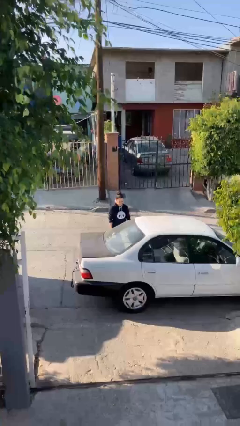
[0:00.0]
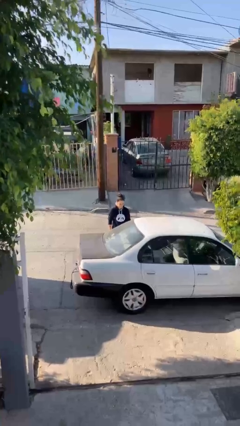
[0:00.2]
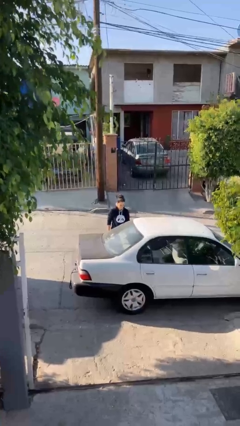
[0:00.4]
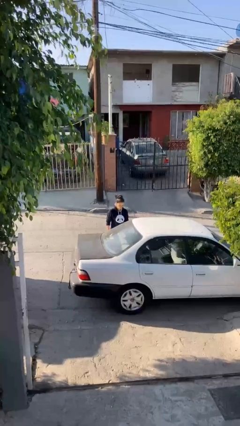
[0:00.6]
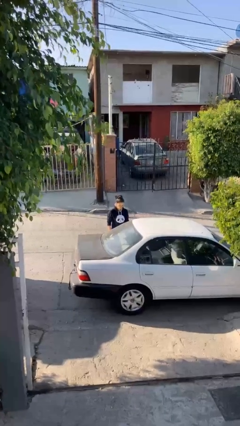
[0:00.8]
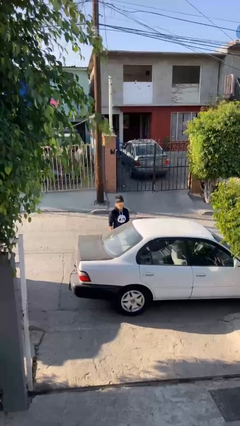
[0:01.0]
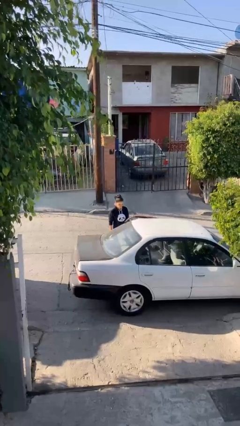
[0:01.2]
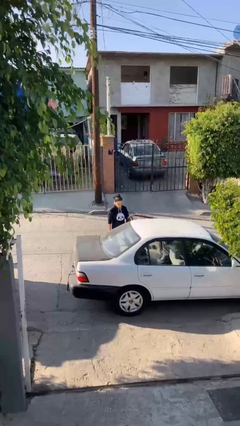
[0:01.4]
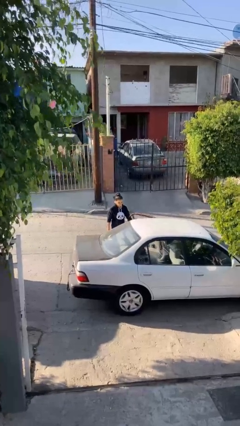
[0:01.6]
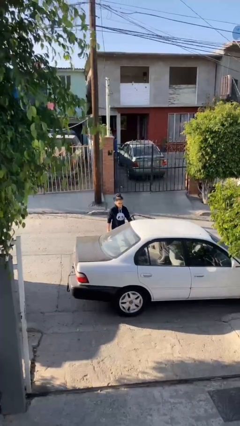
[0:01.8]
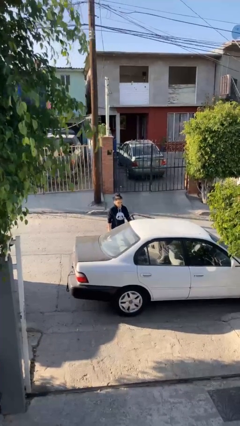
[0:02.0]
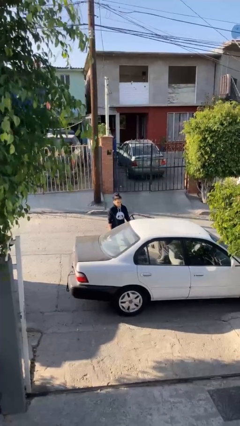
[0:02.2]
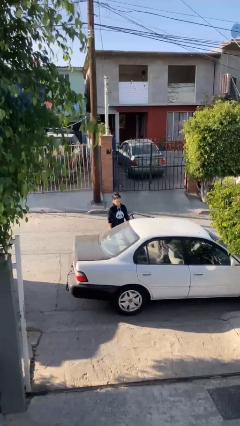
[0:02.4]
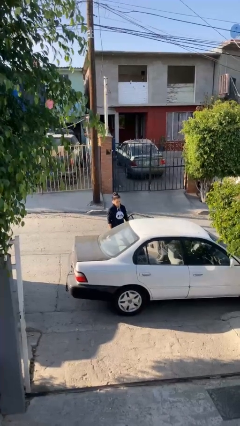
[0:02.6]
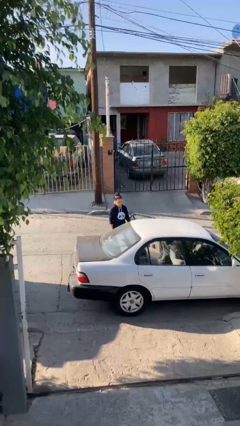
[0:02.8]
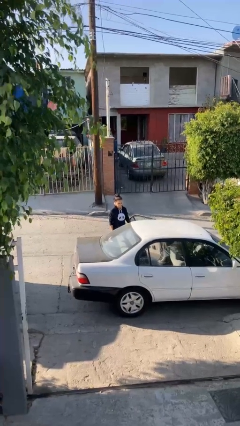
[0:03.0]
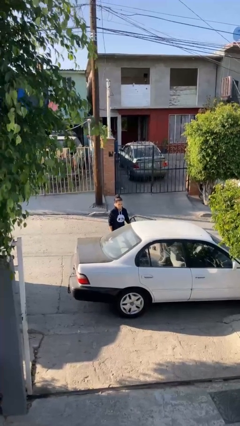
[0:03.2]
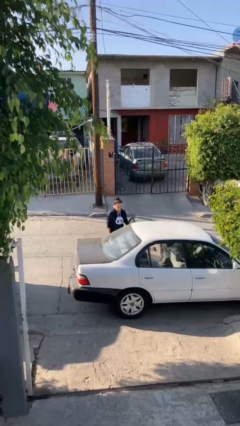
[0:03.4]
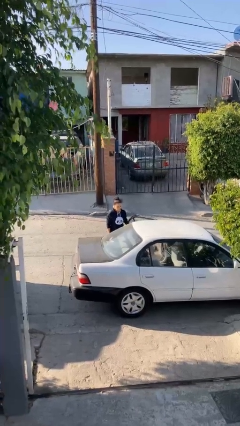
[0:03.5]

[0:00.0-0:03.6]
person opens car door

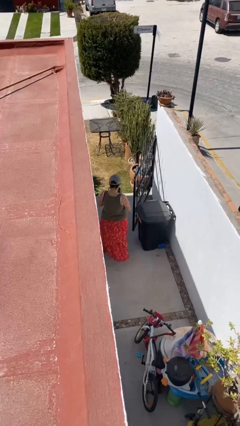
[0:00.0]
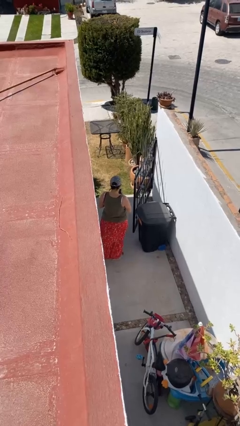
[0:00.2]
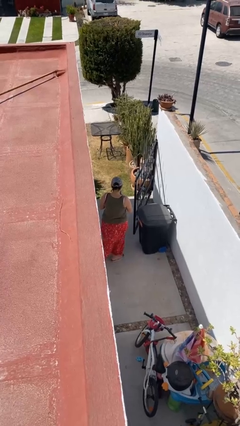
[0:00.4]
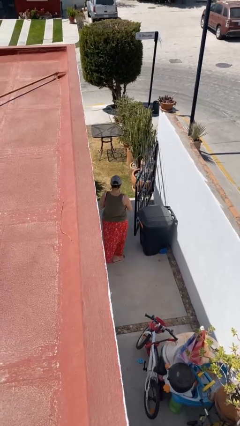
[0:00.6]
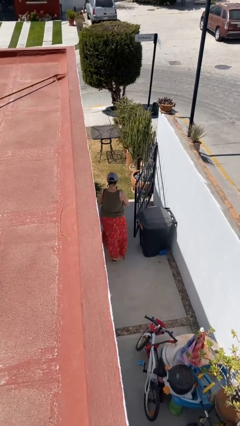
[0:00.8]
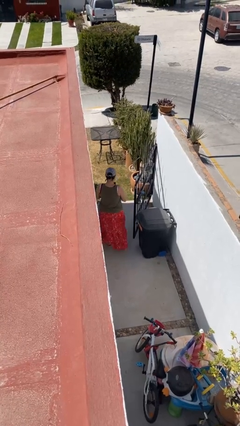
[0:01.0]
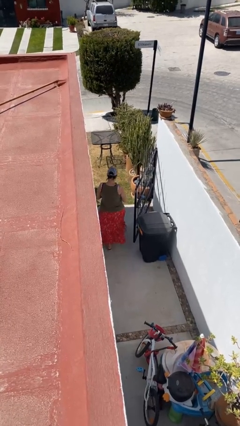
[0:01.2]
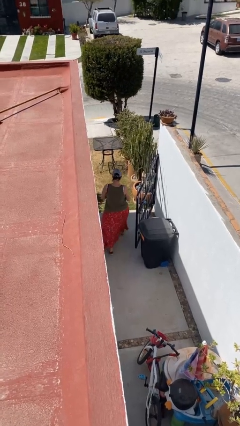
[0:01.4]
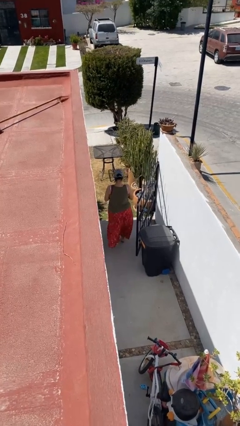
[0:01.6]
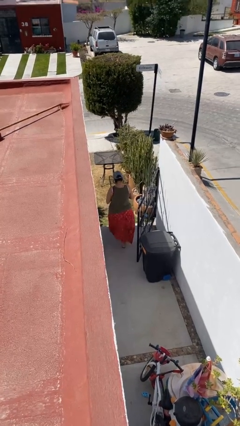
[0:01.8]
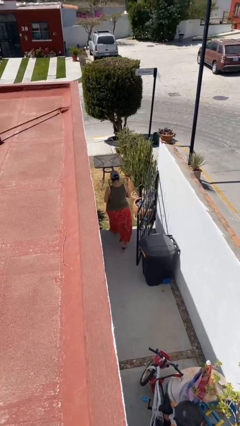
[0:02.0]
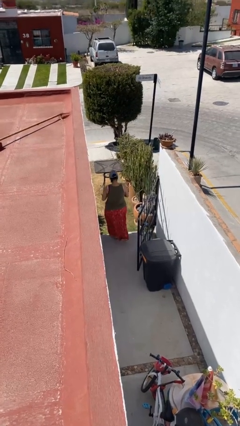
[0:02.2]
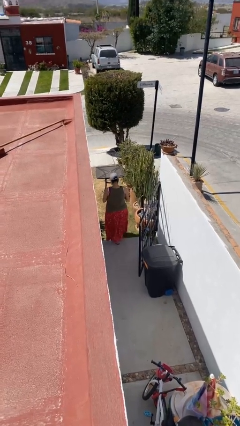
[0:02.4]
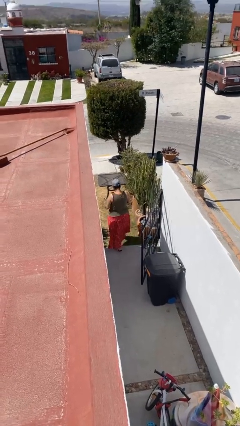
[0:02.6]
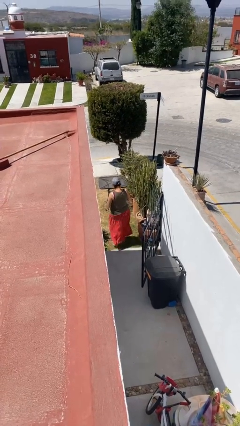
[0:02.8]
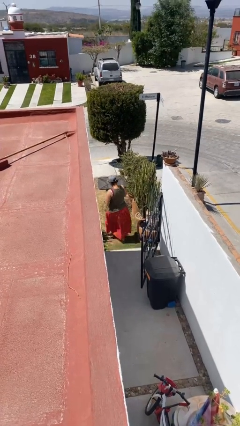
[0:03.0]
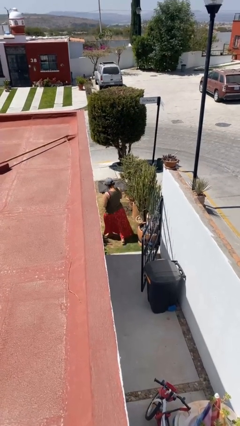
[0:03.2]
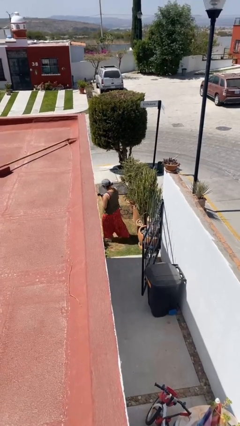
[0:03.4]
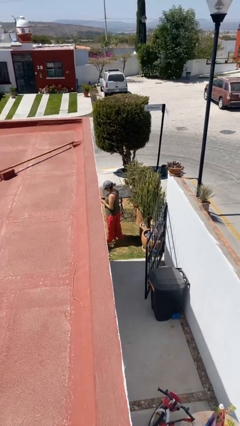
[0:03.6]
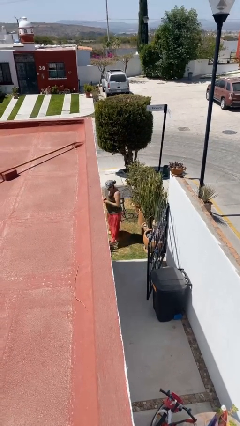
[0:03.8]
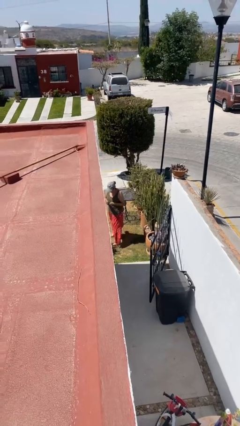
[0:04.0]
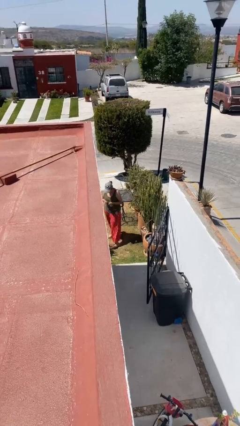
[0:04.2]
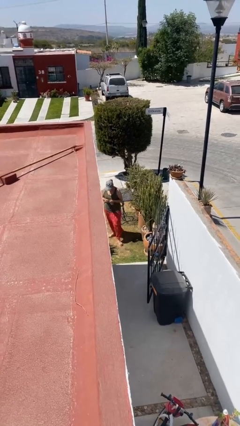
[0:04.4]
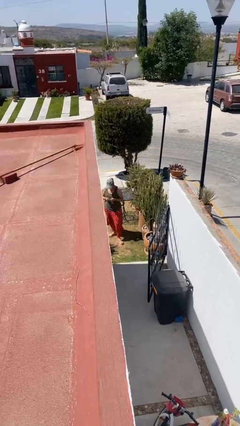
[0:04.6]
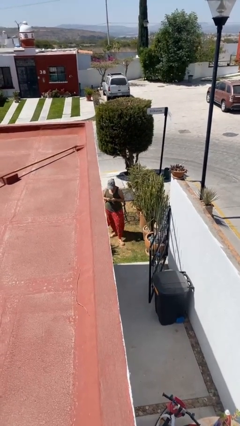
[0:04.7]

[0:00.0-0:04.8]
person exits scene through structure

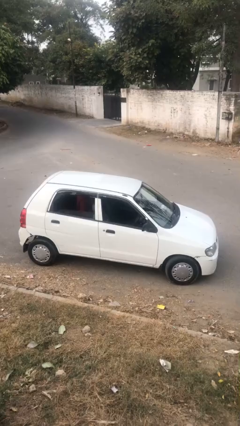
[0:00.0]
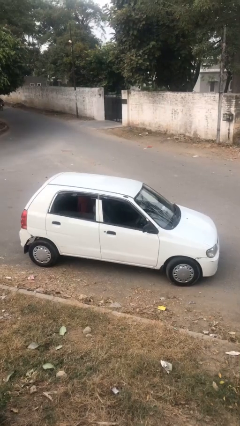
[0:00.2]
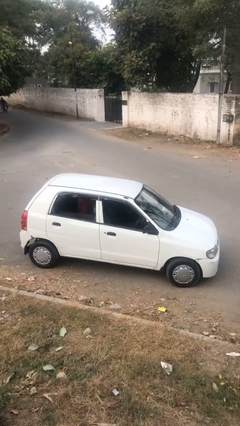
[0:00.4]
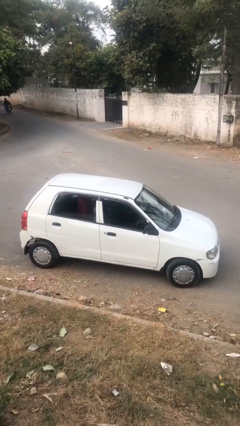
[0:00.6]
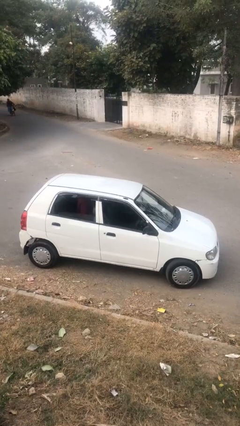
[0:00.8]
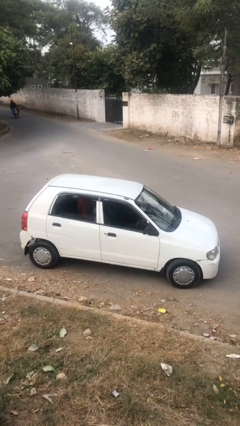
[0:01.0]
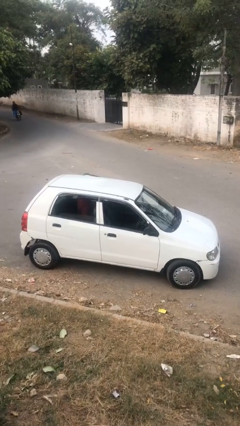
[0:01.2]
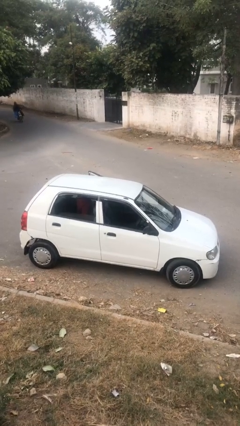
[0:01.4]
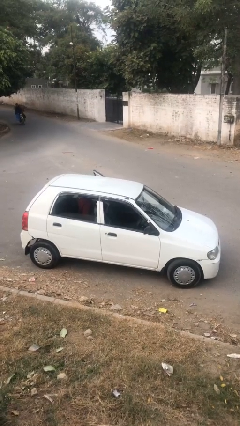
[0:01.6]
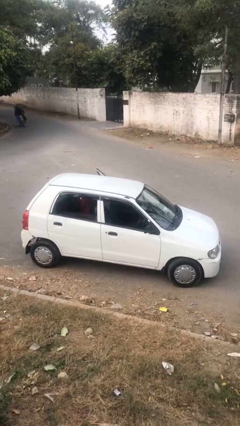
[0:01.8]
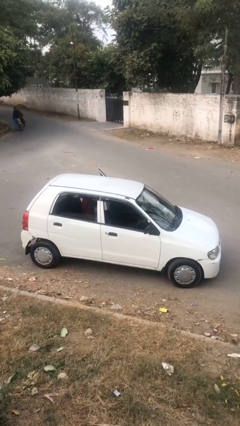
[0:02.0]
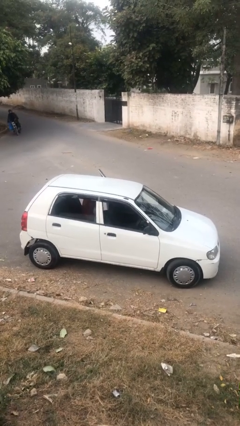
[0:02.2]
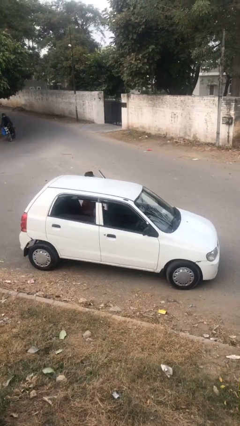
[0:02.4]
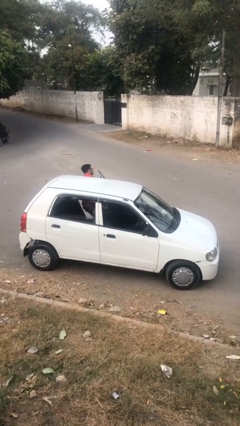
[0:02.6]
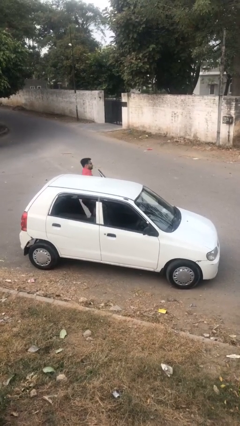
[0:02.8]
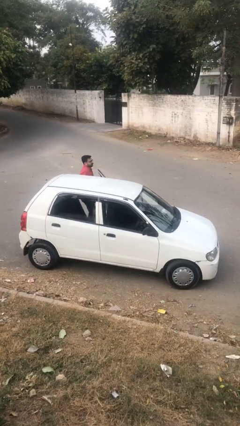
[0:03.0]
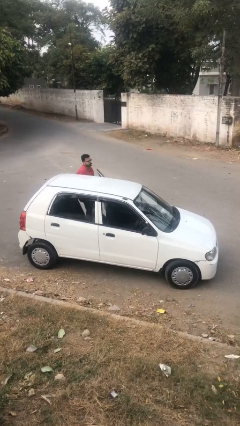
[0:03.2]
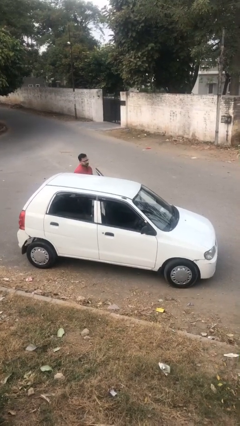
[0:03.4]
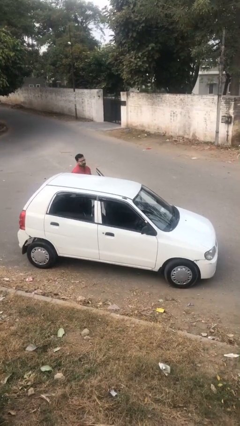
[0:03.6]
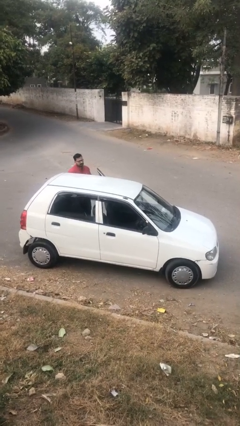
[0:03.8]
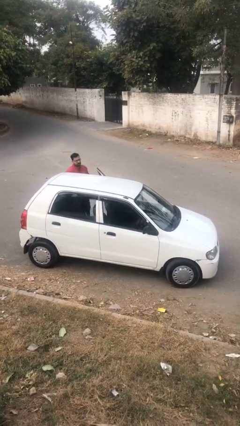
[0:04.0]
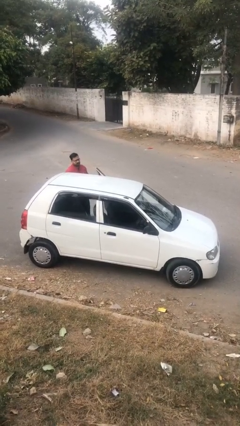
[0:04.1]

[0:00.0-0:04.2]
car drops off person

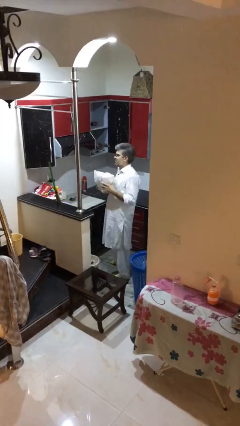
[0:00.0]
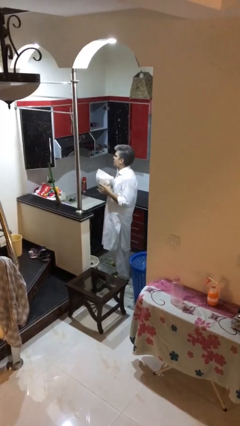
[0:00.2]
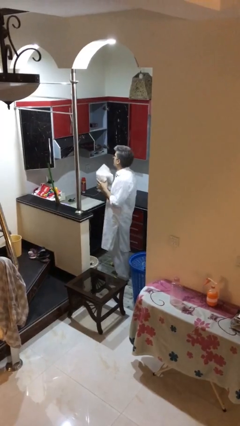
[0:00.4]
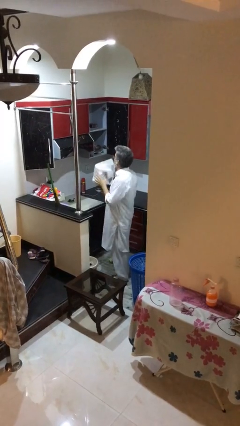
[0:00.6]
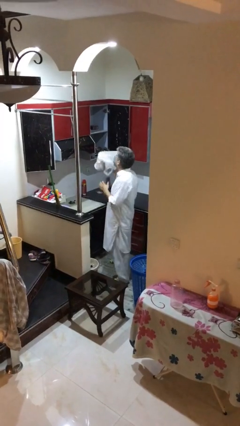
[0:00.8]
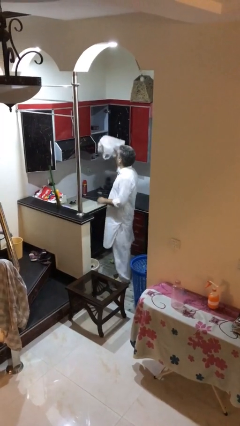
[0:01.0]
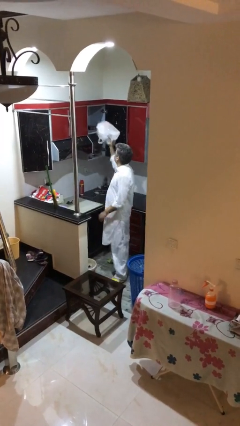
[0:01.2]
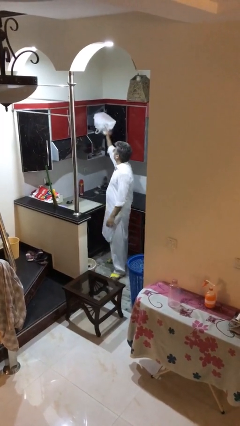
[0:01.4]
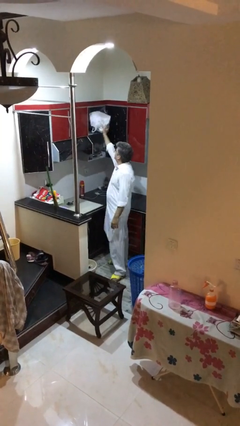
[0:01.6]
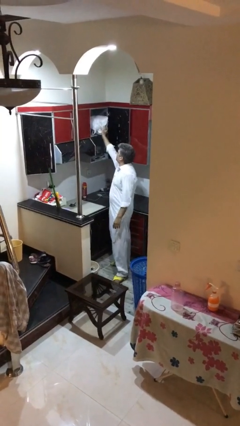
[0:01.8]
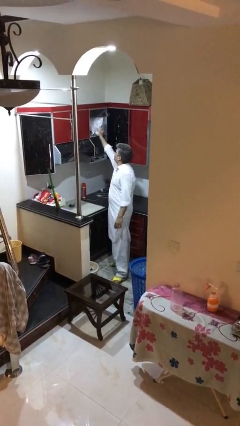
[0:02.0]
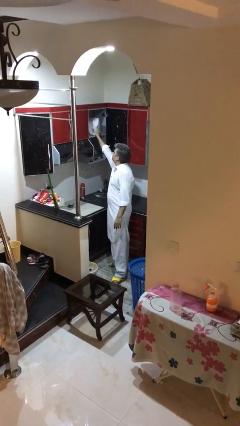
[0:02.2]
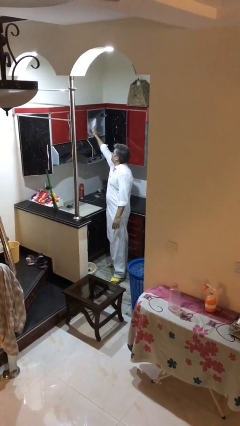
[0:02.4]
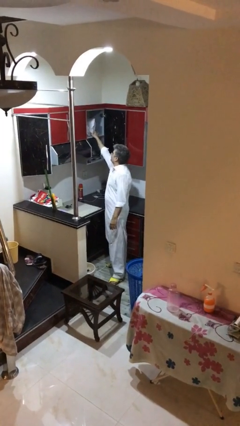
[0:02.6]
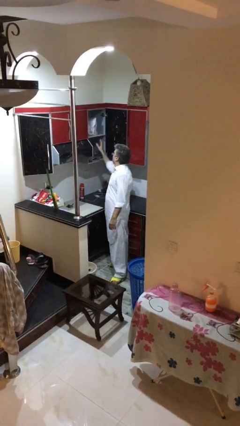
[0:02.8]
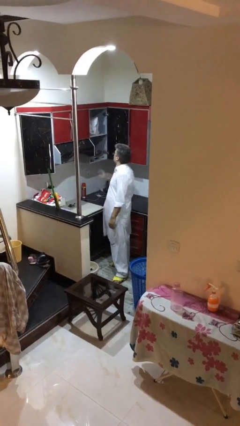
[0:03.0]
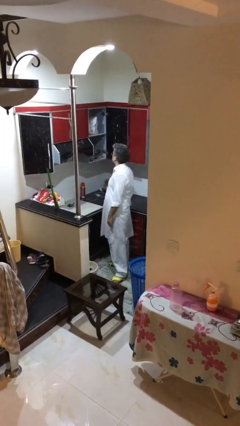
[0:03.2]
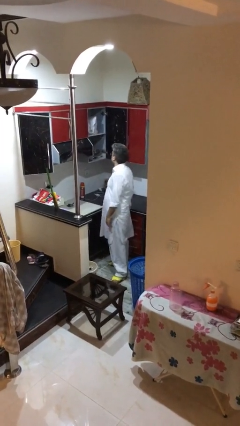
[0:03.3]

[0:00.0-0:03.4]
person puts down object on shelf

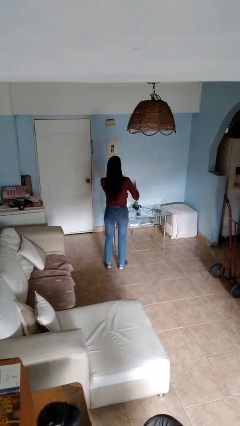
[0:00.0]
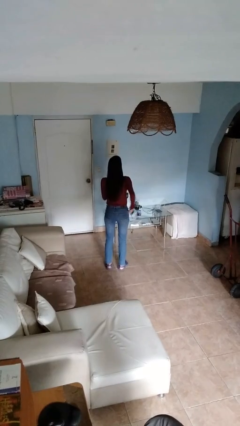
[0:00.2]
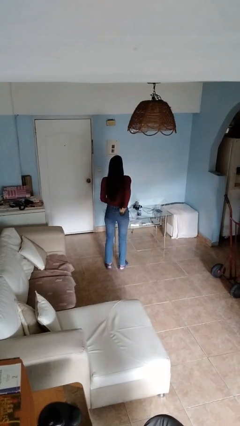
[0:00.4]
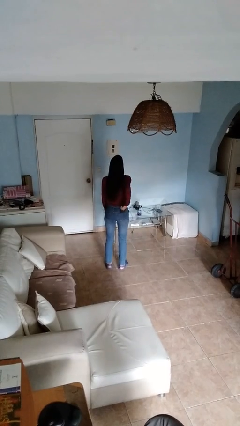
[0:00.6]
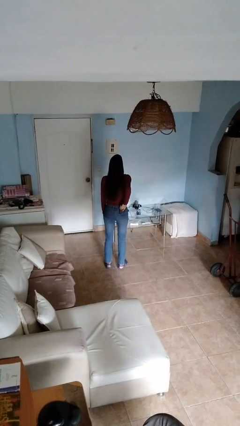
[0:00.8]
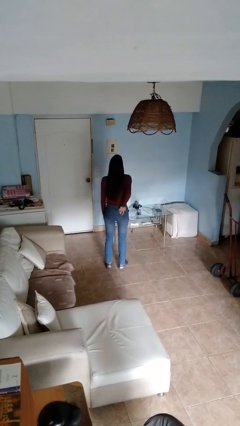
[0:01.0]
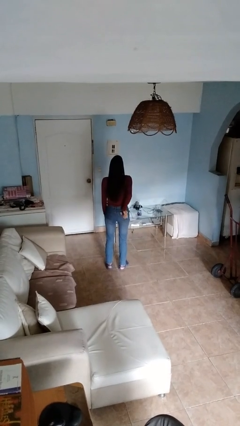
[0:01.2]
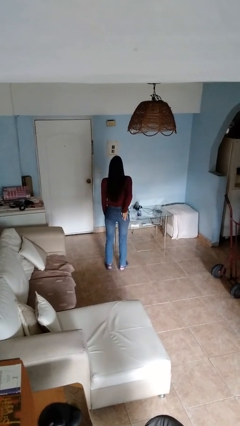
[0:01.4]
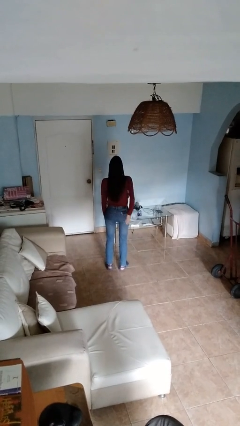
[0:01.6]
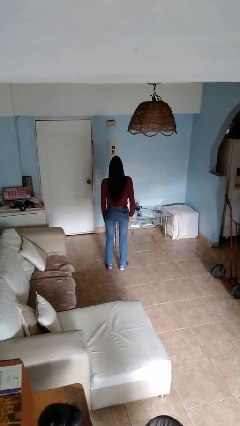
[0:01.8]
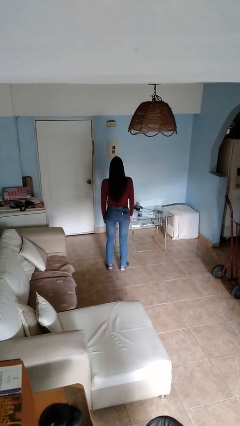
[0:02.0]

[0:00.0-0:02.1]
person puts phone into pocket
